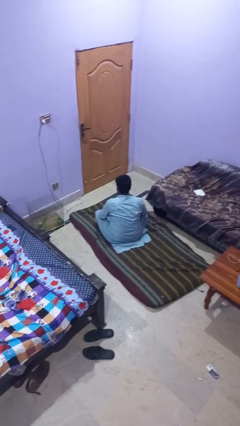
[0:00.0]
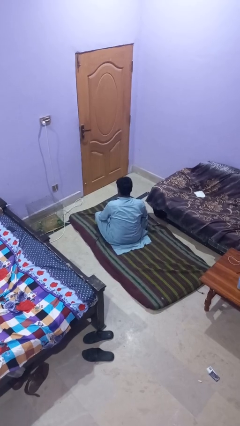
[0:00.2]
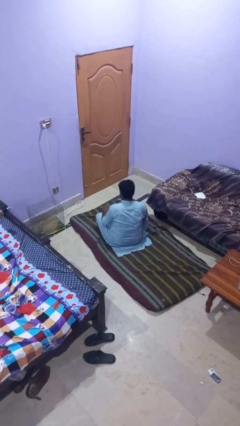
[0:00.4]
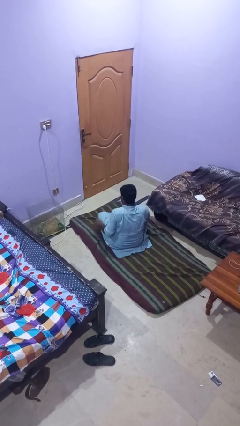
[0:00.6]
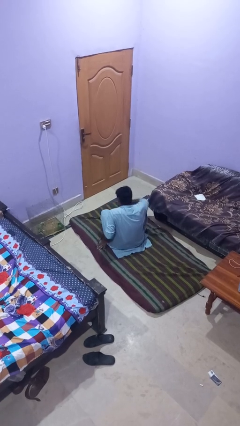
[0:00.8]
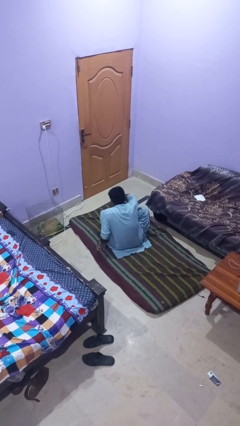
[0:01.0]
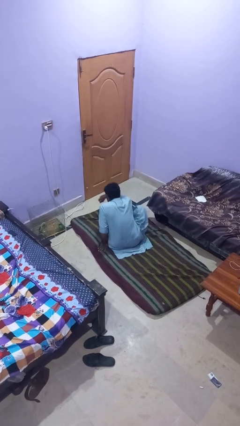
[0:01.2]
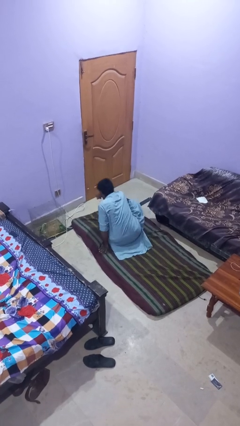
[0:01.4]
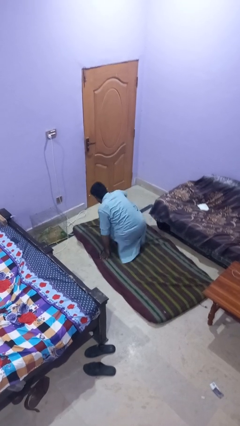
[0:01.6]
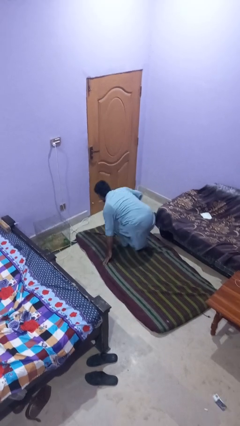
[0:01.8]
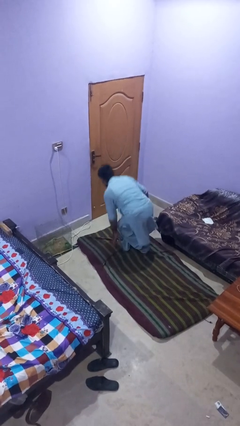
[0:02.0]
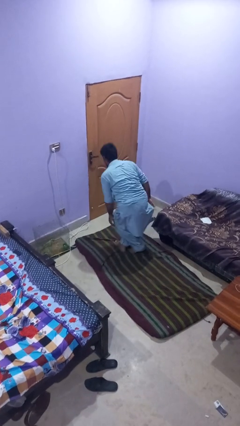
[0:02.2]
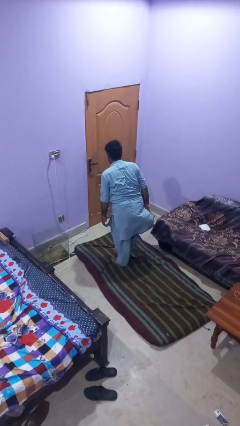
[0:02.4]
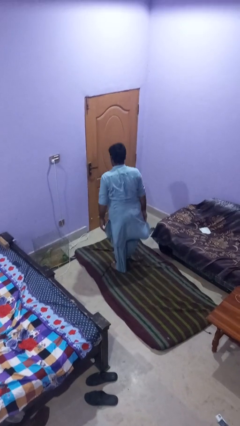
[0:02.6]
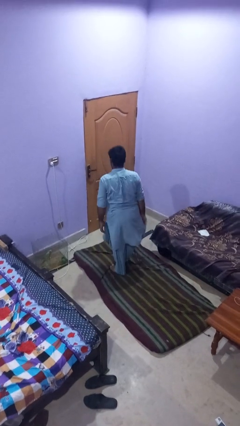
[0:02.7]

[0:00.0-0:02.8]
person stands up from floor

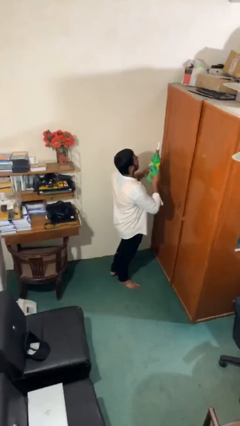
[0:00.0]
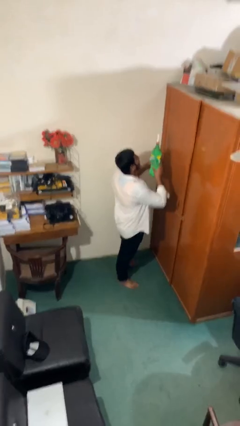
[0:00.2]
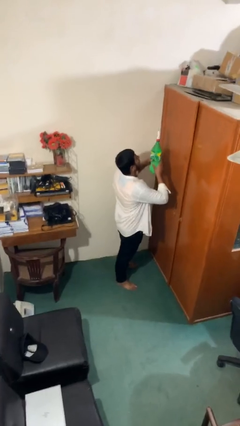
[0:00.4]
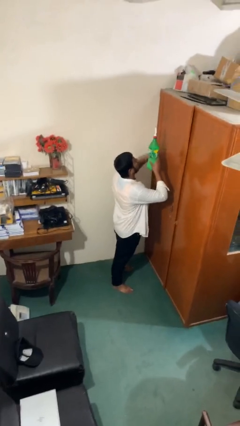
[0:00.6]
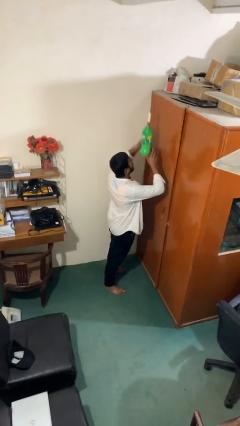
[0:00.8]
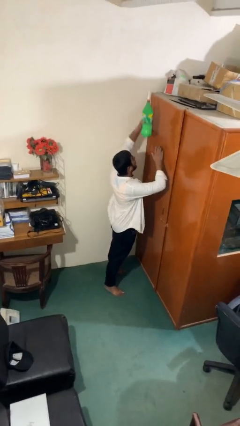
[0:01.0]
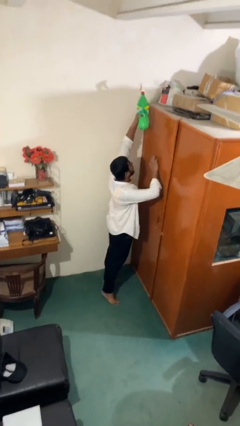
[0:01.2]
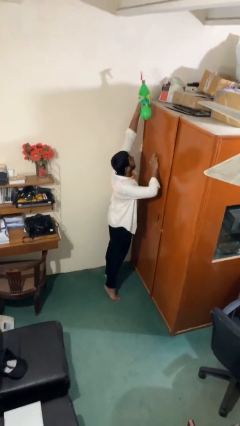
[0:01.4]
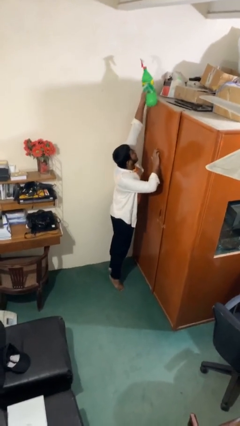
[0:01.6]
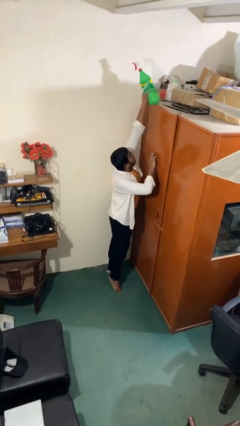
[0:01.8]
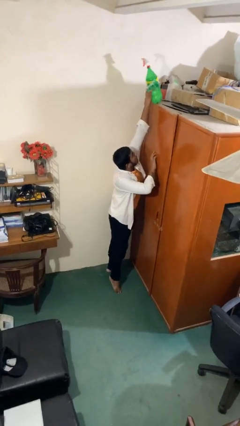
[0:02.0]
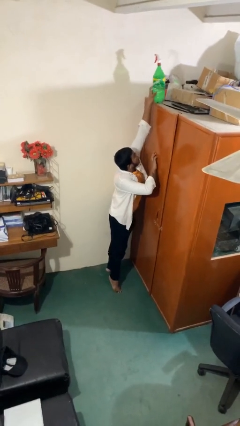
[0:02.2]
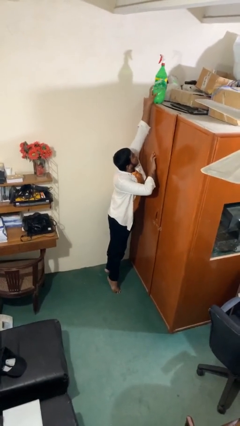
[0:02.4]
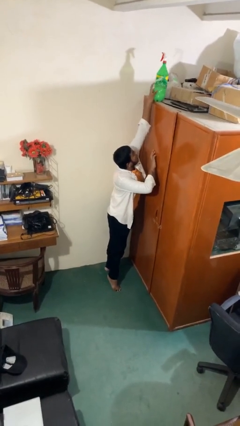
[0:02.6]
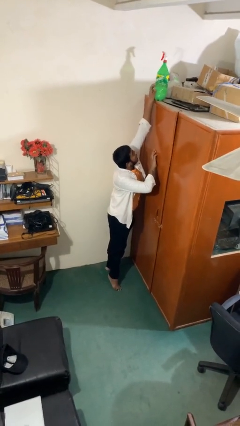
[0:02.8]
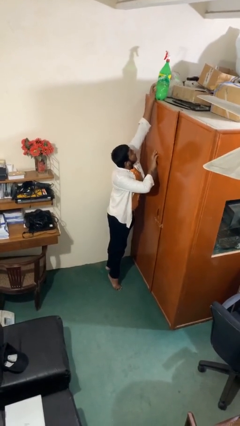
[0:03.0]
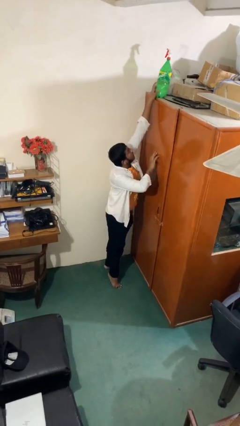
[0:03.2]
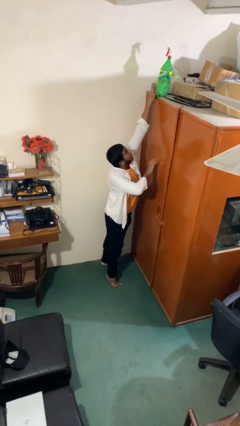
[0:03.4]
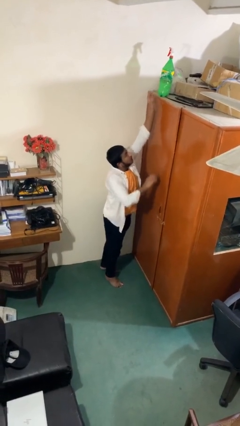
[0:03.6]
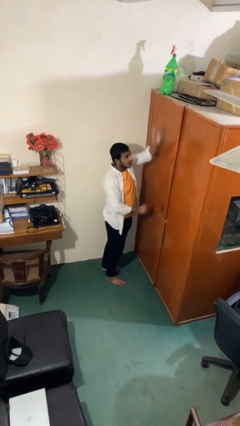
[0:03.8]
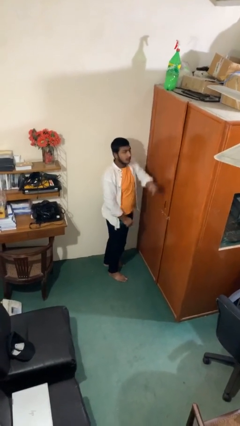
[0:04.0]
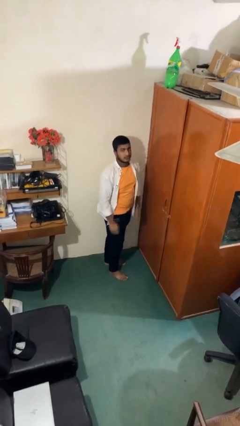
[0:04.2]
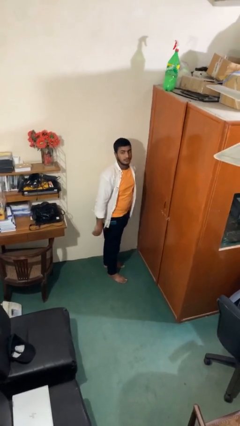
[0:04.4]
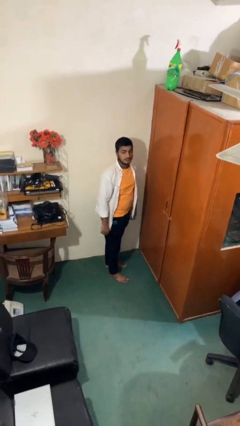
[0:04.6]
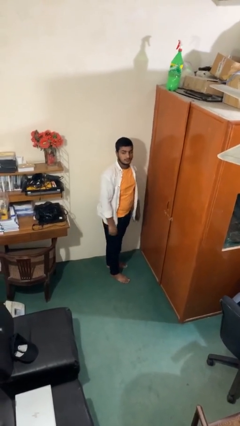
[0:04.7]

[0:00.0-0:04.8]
person puts down object on shelf

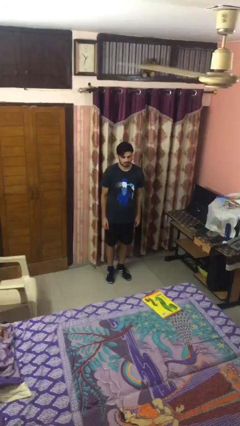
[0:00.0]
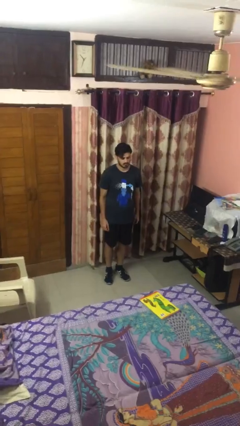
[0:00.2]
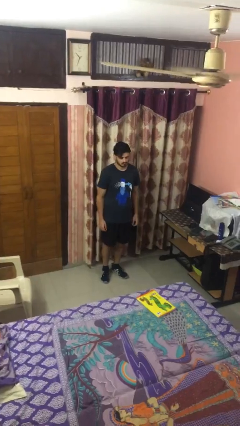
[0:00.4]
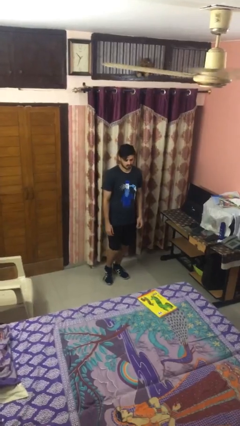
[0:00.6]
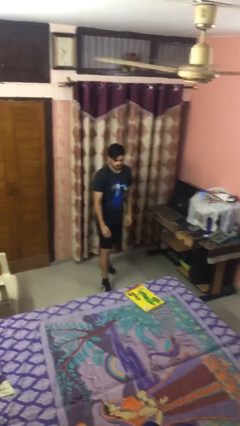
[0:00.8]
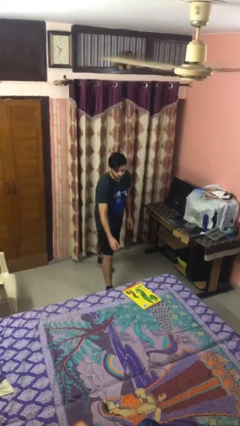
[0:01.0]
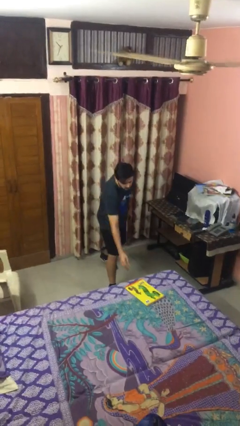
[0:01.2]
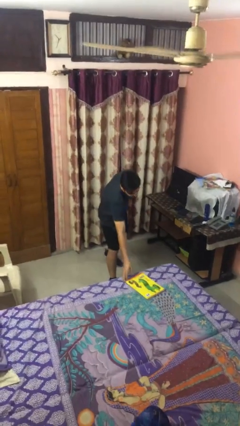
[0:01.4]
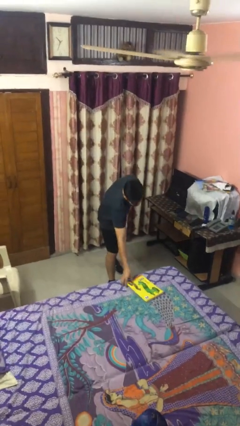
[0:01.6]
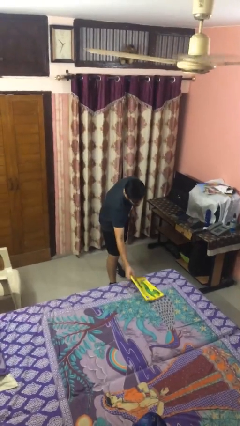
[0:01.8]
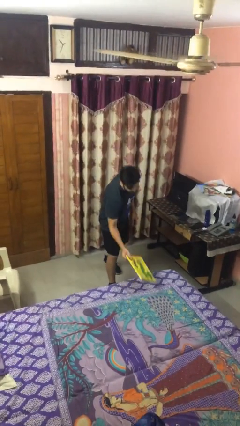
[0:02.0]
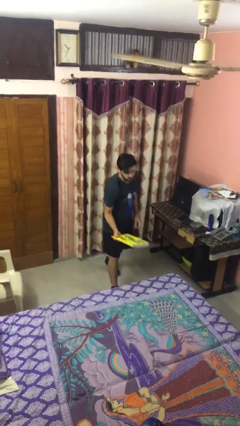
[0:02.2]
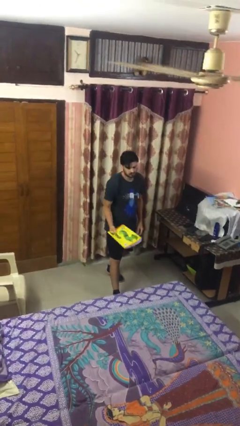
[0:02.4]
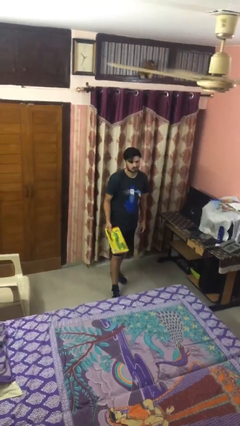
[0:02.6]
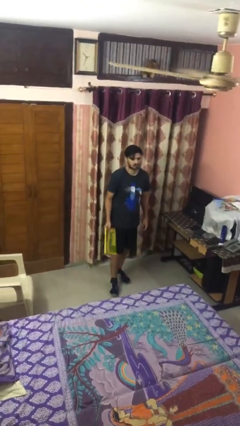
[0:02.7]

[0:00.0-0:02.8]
person picks up object from bed

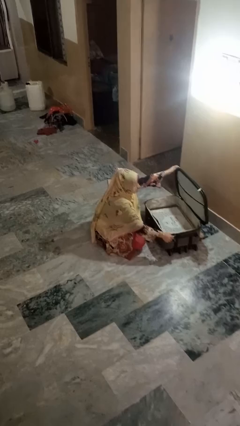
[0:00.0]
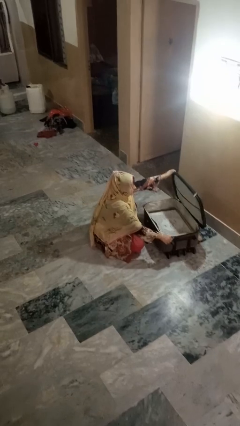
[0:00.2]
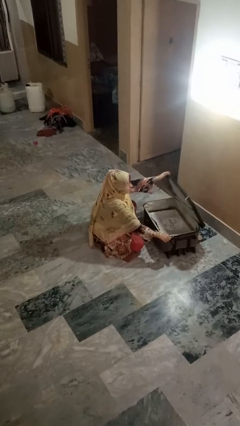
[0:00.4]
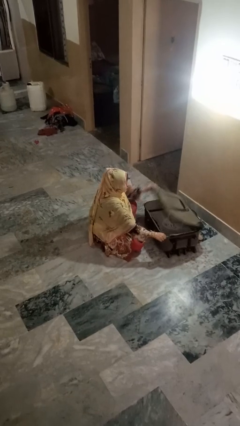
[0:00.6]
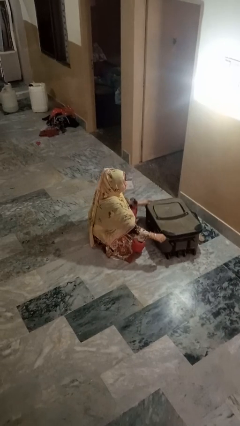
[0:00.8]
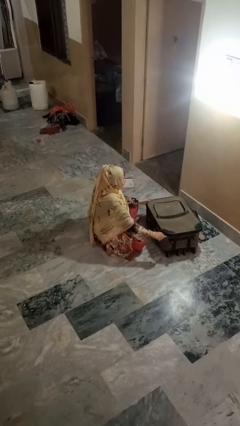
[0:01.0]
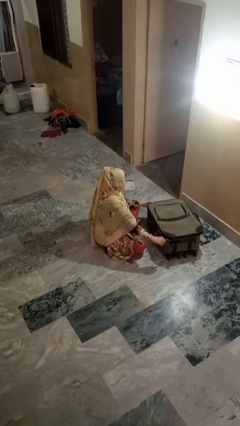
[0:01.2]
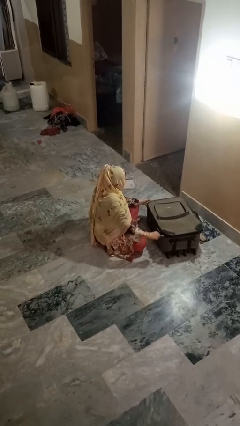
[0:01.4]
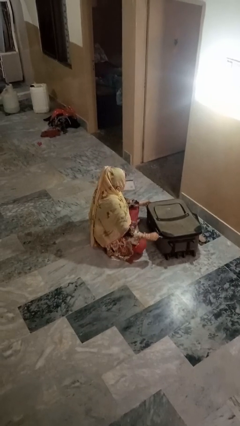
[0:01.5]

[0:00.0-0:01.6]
person closes suitcase

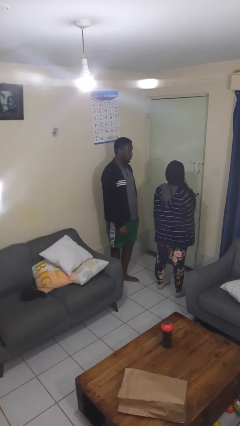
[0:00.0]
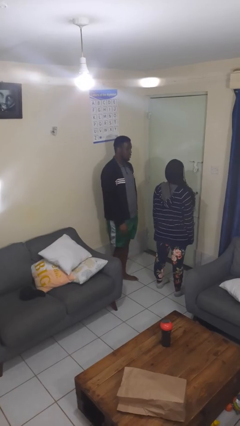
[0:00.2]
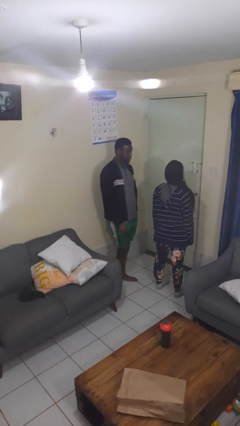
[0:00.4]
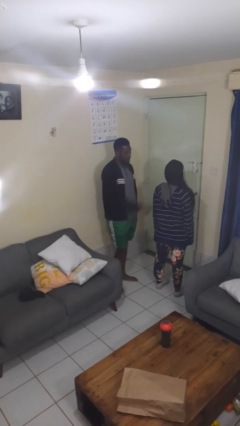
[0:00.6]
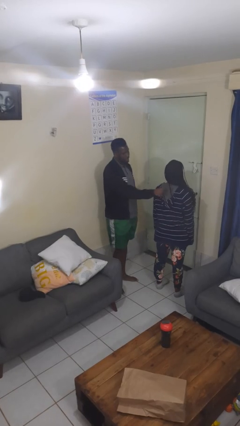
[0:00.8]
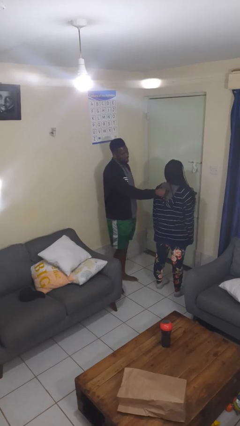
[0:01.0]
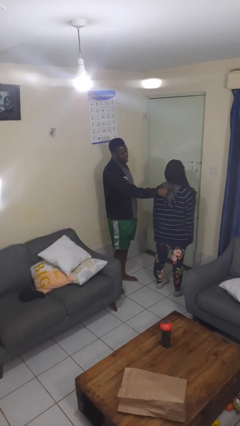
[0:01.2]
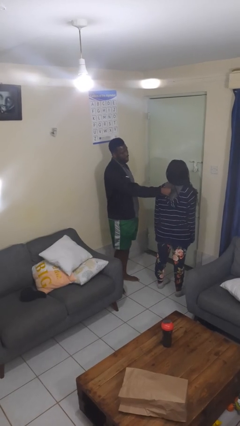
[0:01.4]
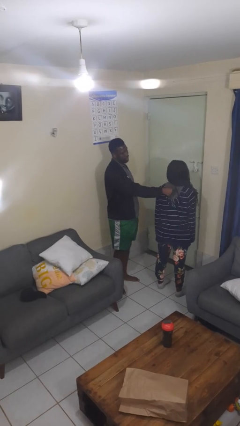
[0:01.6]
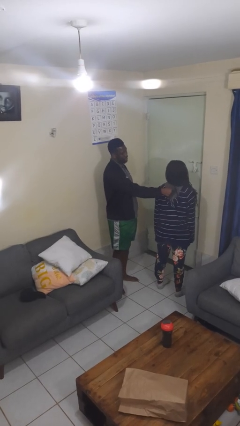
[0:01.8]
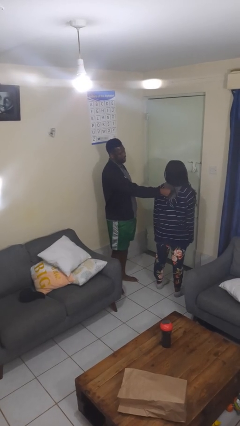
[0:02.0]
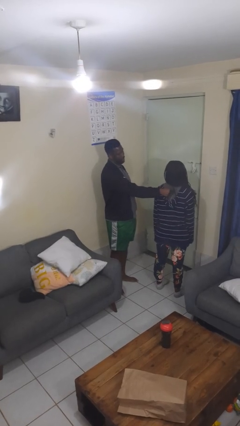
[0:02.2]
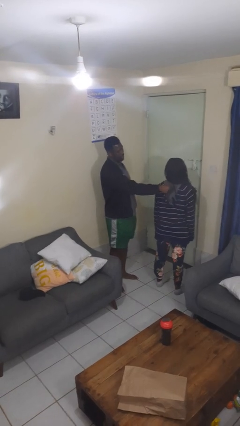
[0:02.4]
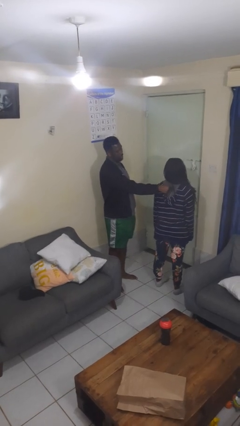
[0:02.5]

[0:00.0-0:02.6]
person touches back of person

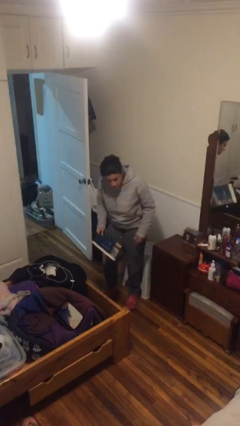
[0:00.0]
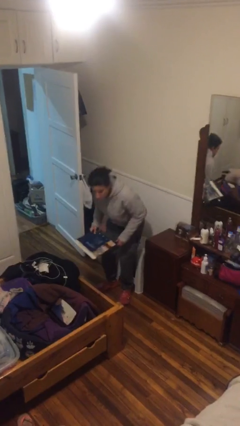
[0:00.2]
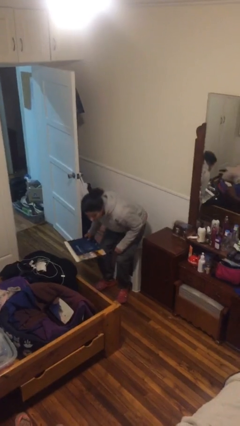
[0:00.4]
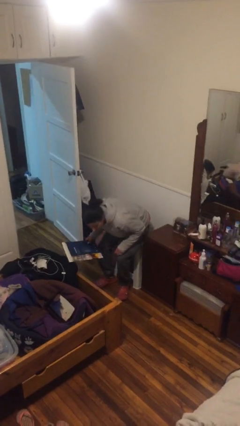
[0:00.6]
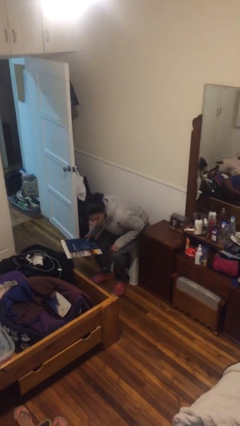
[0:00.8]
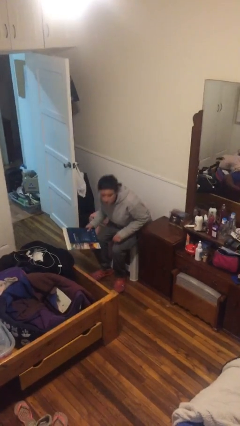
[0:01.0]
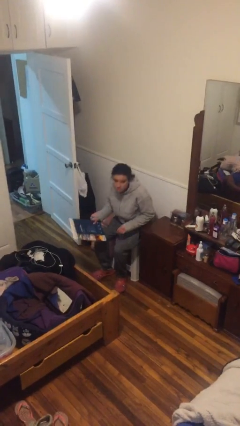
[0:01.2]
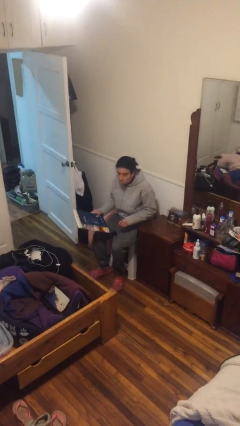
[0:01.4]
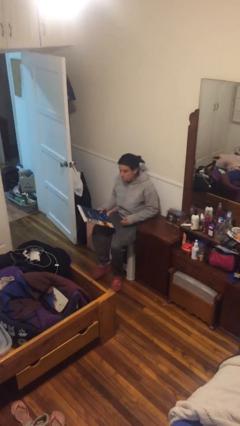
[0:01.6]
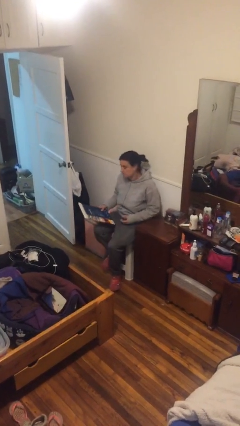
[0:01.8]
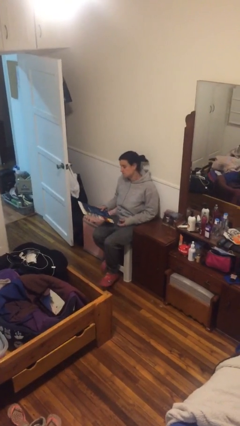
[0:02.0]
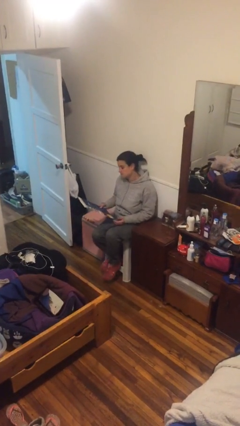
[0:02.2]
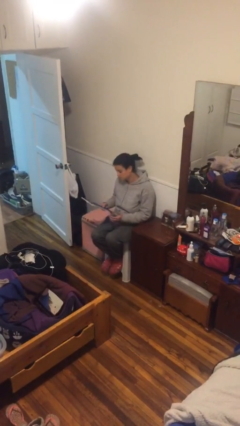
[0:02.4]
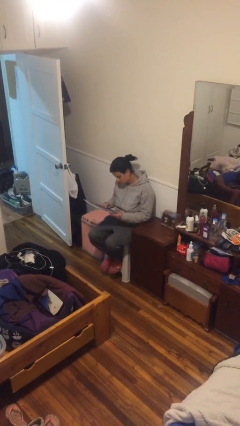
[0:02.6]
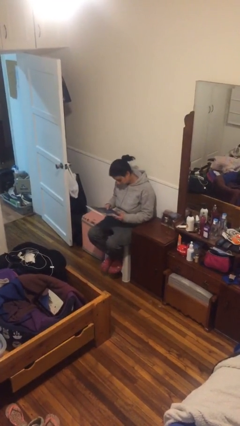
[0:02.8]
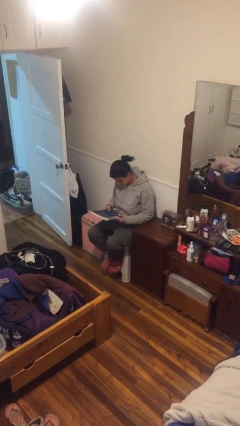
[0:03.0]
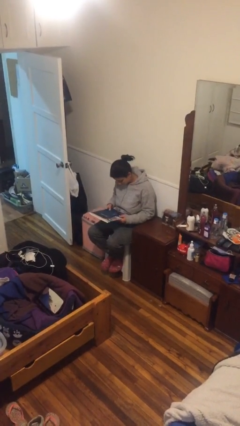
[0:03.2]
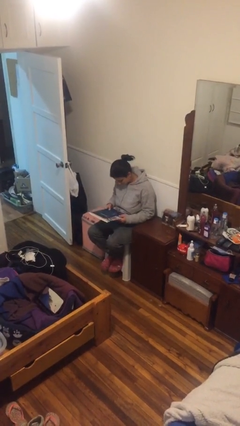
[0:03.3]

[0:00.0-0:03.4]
person sits down
